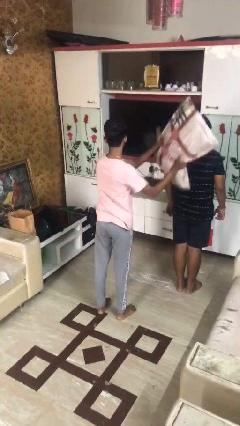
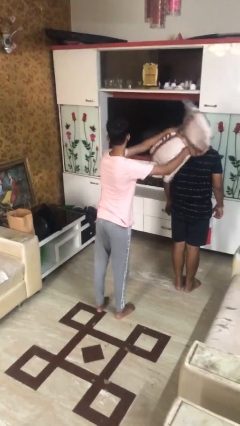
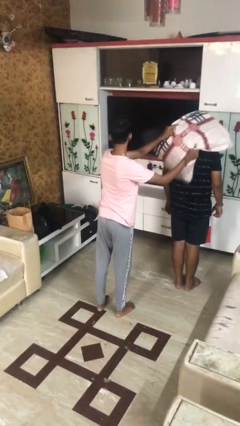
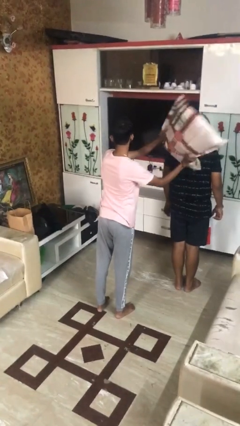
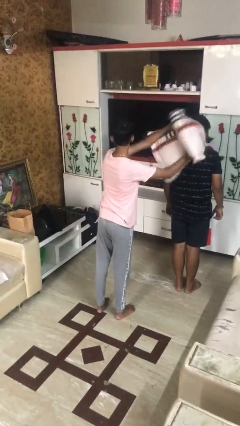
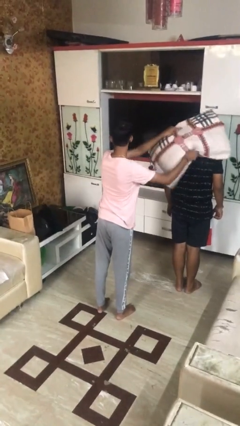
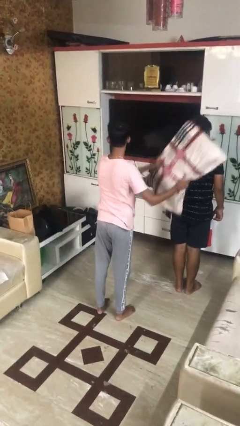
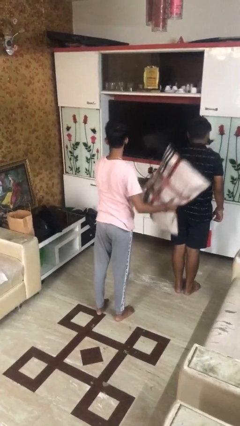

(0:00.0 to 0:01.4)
person hits person with pillow

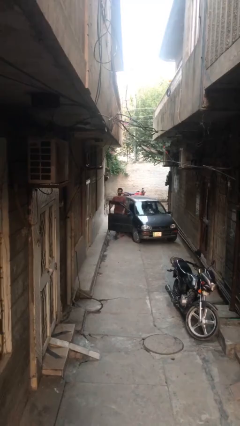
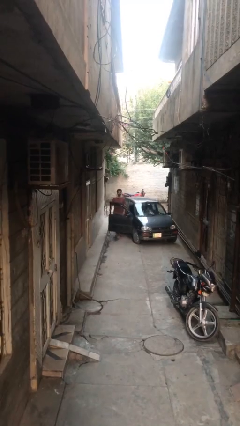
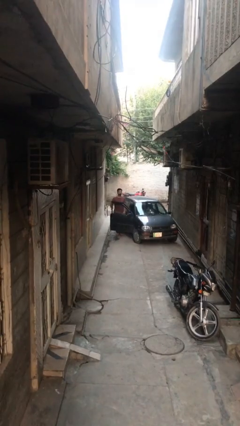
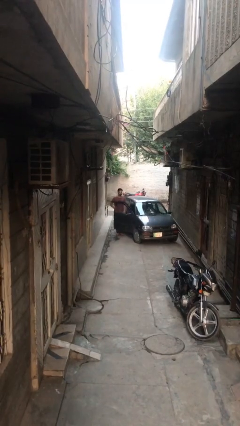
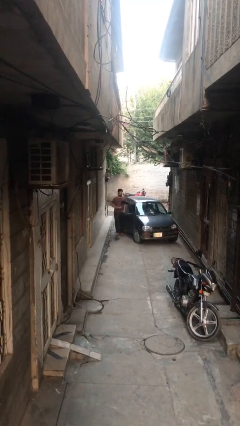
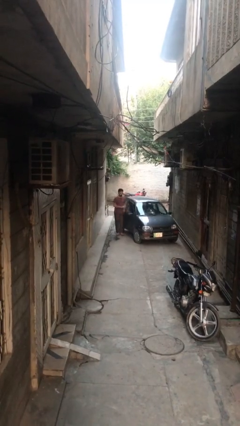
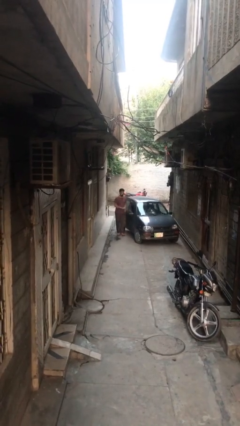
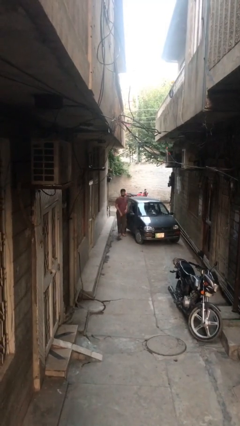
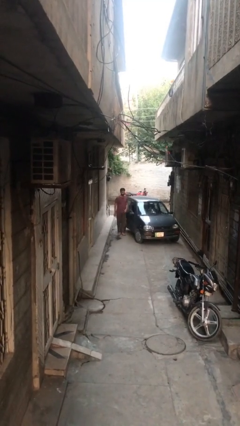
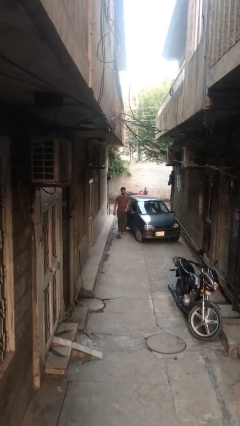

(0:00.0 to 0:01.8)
person closes car door

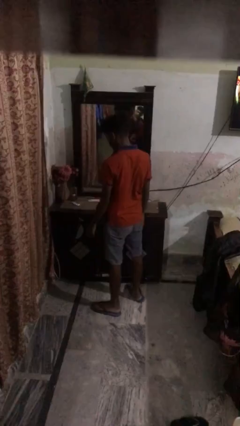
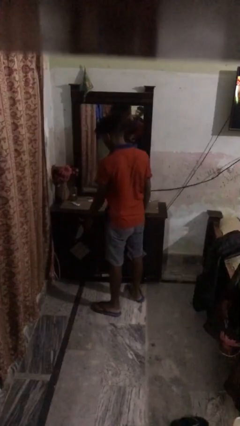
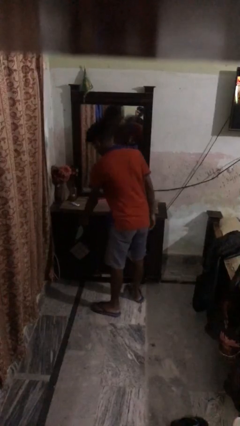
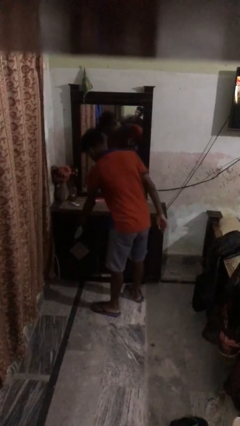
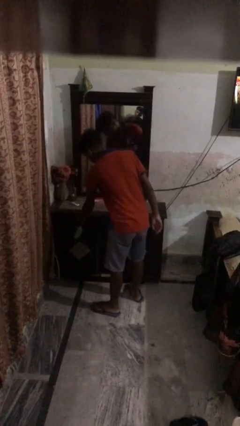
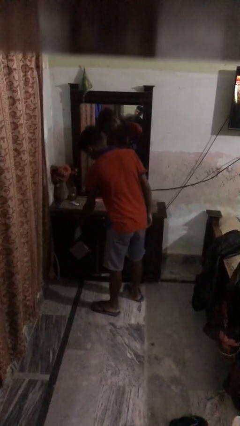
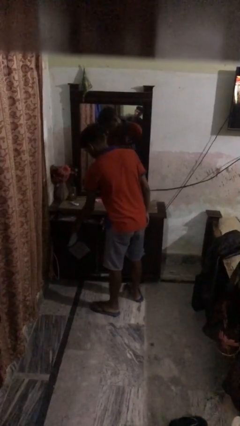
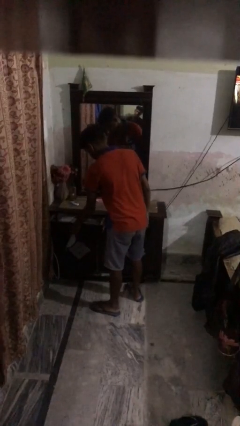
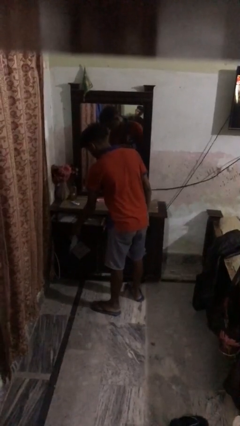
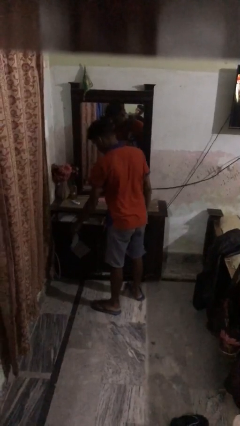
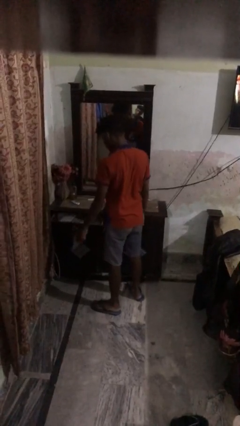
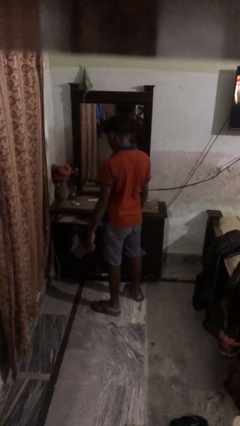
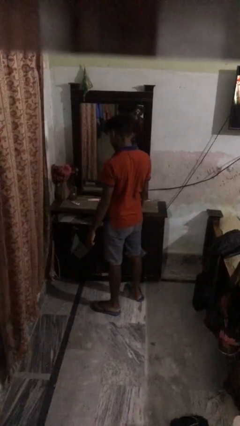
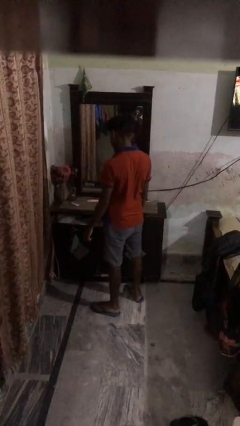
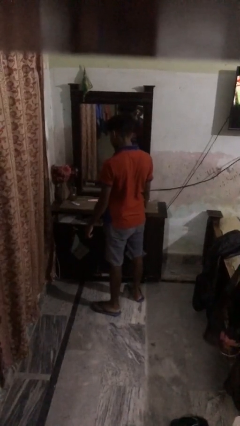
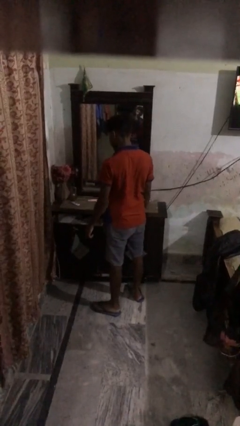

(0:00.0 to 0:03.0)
person opens dresser drawer

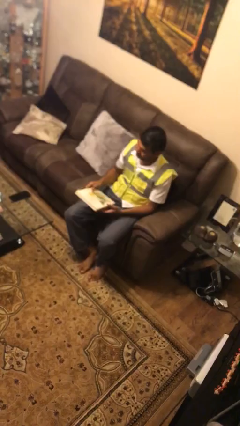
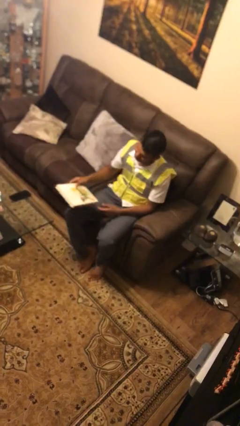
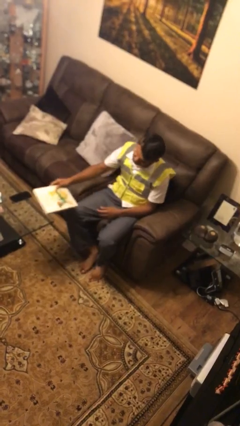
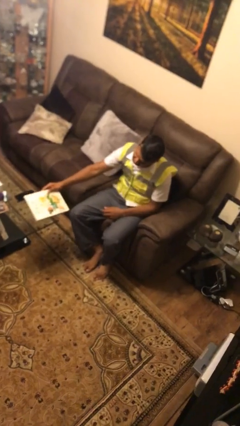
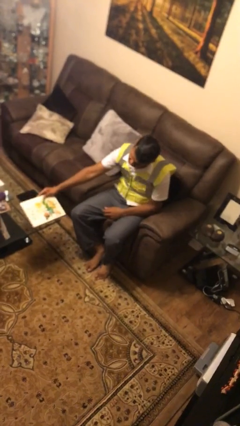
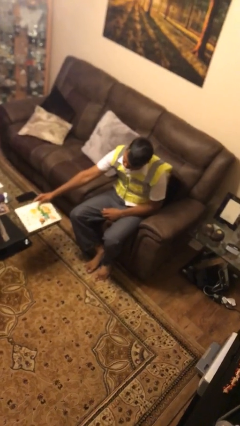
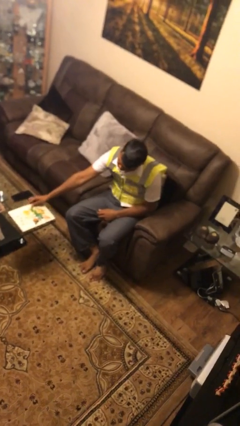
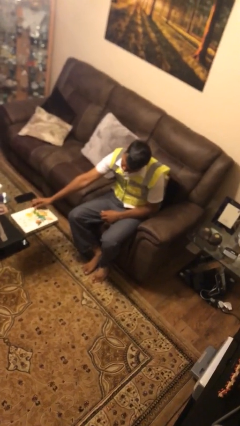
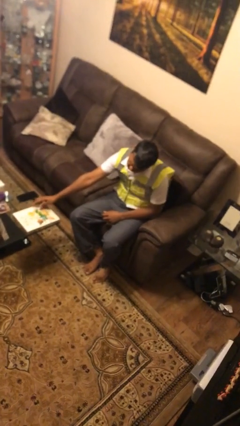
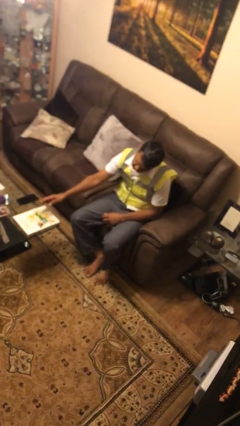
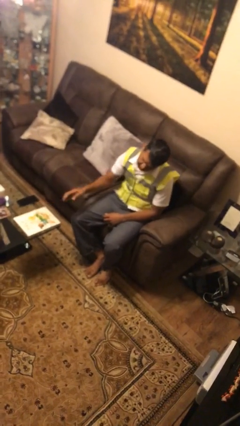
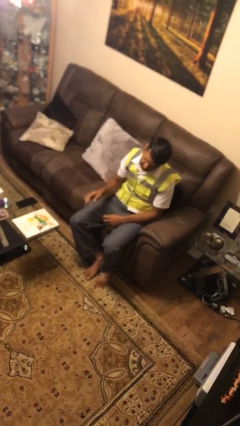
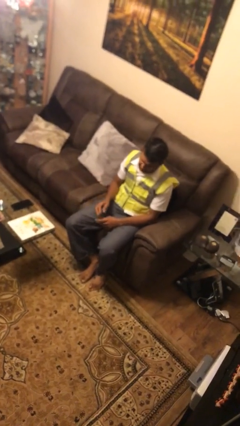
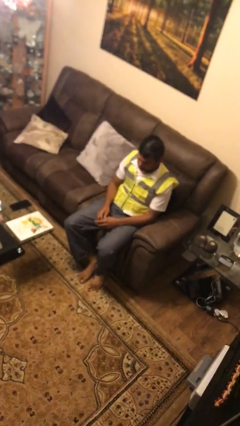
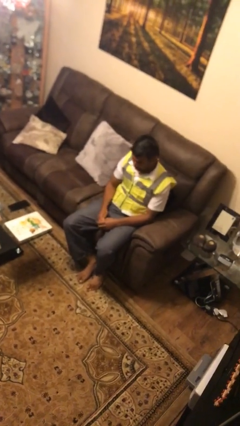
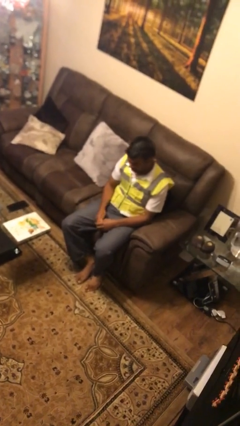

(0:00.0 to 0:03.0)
person puts down object on table

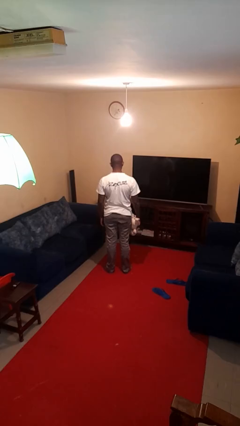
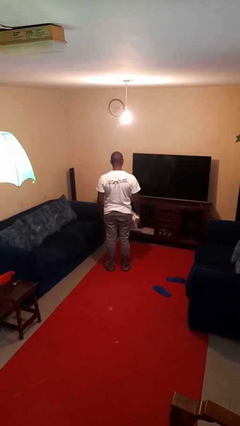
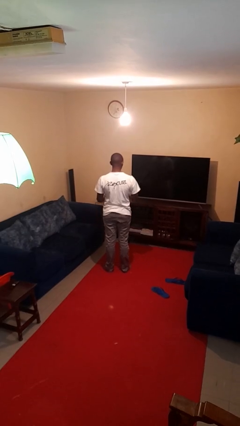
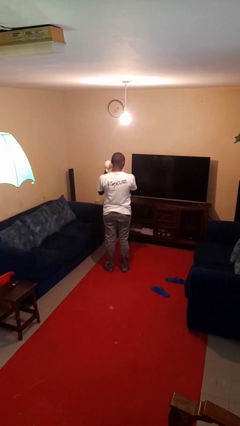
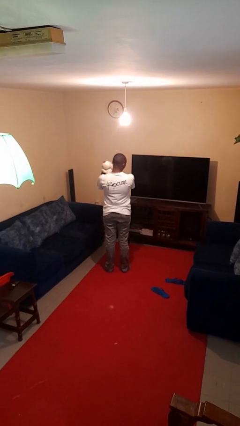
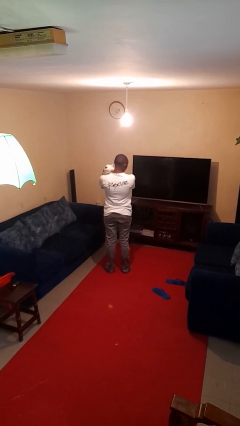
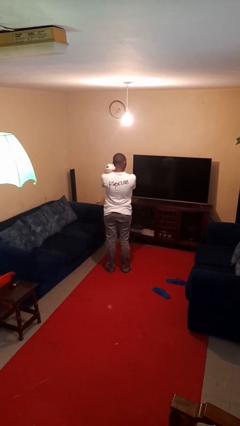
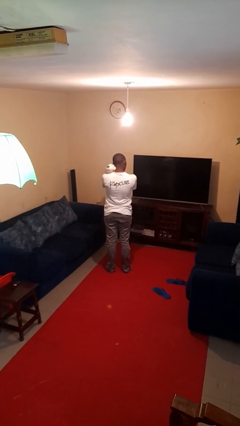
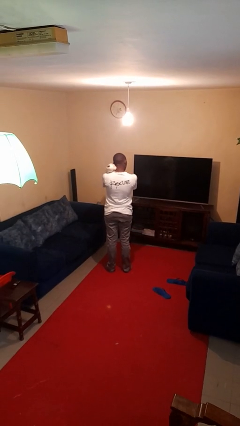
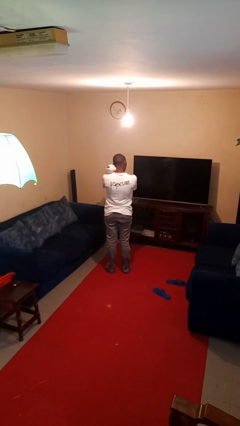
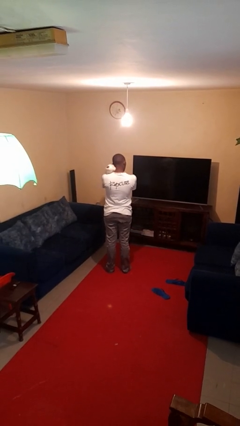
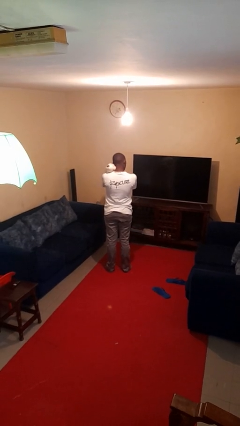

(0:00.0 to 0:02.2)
person hugs stuffed animal

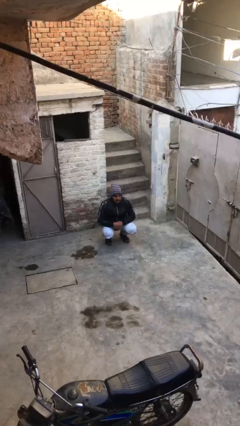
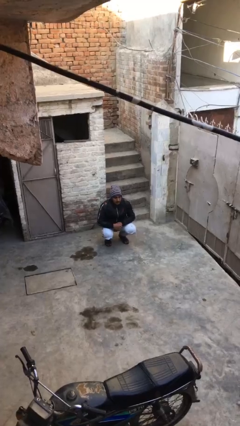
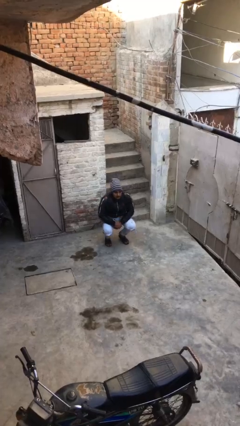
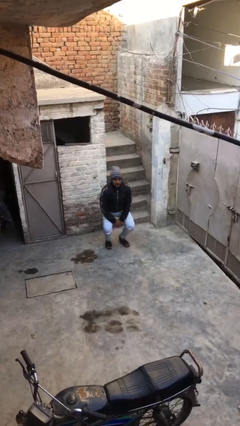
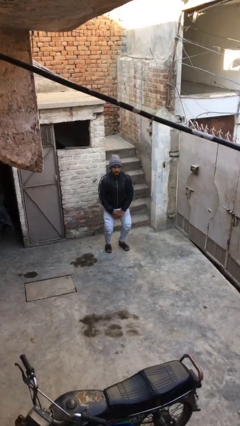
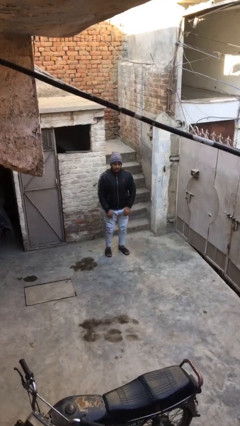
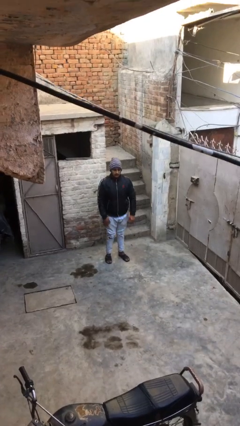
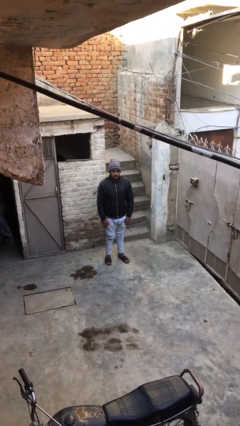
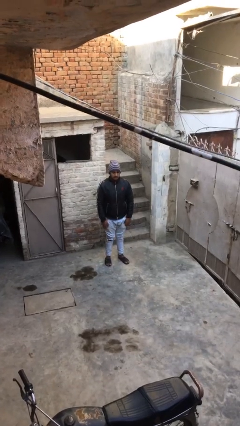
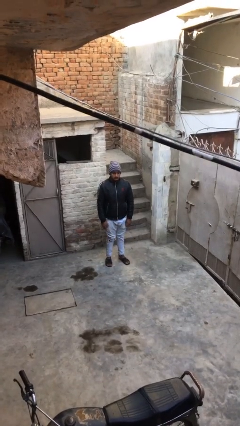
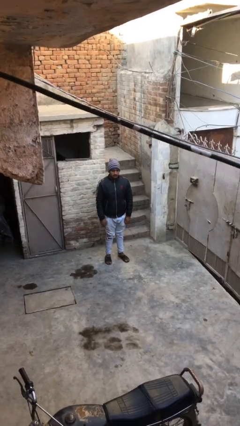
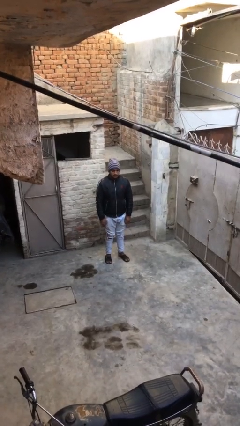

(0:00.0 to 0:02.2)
person stands up

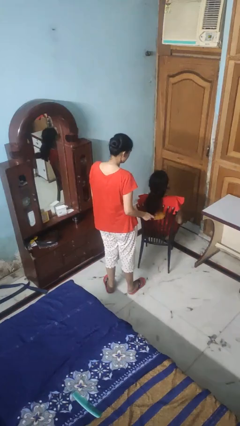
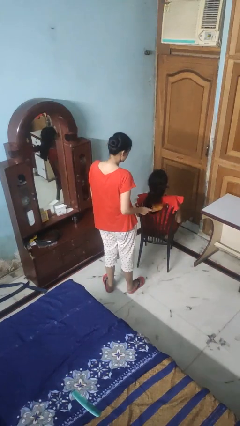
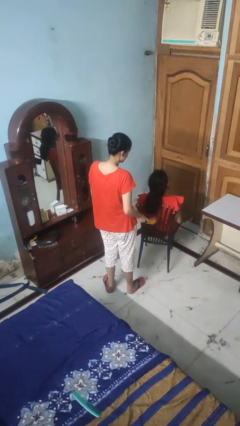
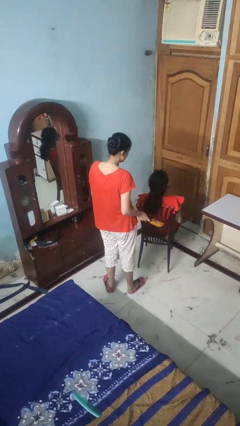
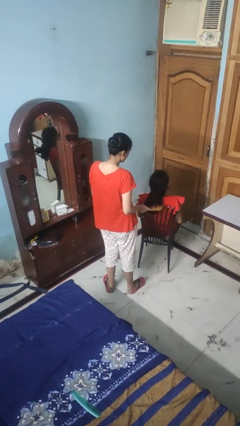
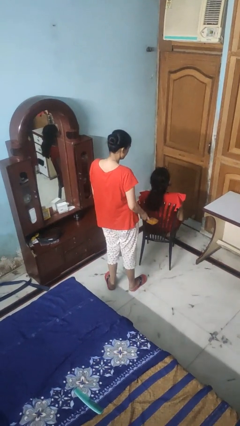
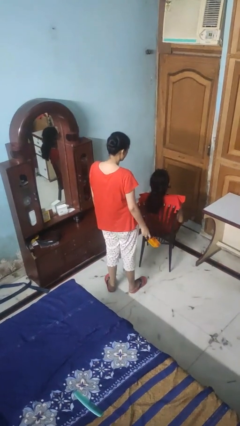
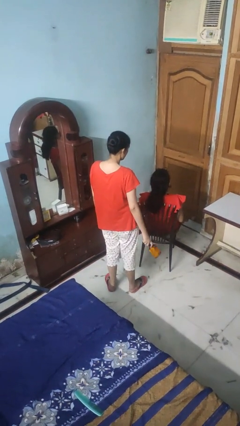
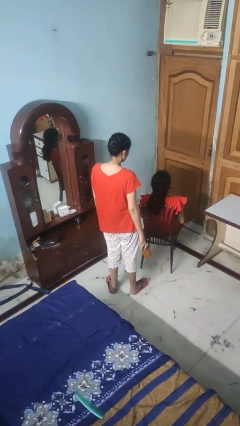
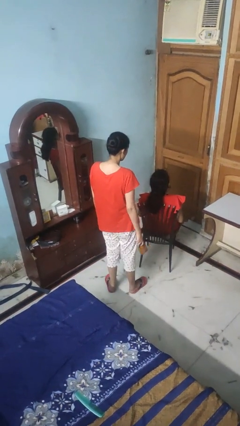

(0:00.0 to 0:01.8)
person brushes hair of person

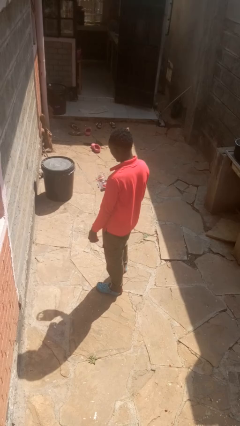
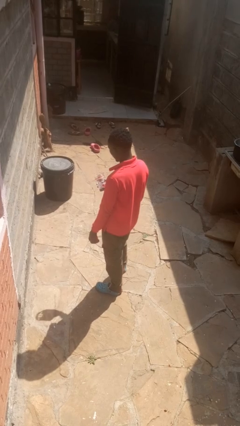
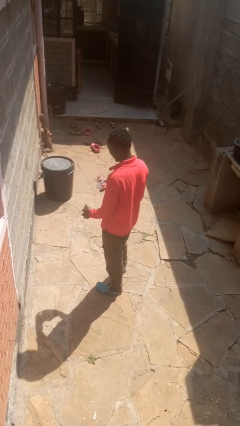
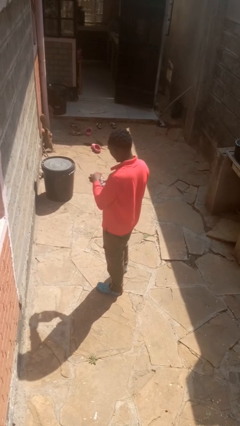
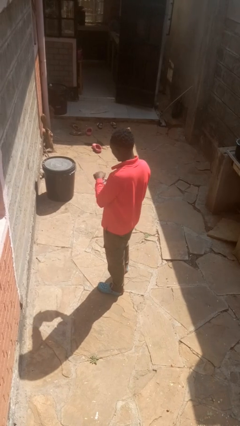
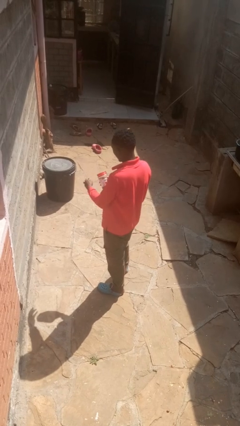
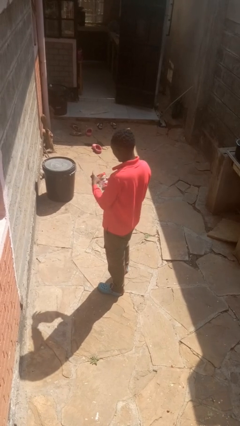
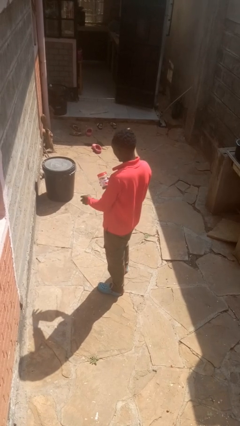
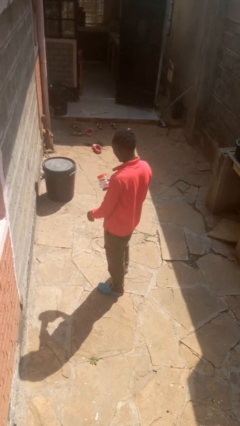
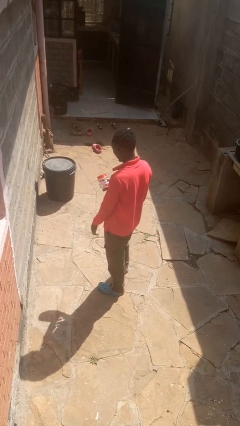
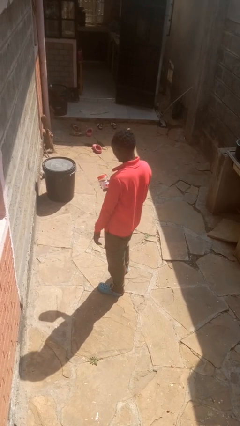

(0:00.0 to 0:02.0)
person closes jar
